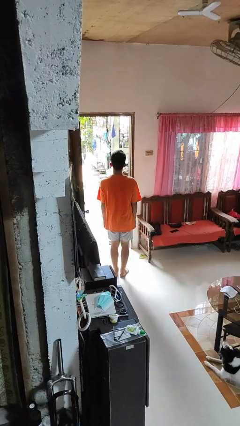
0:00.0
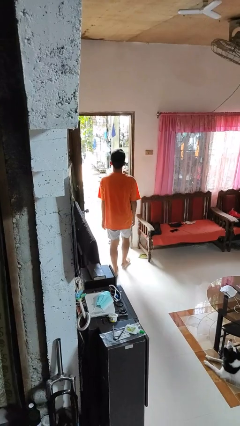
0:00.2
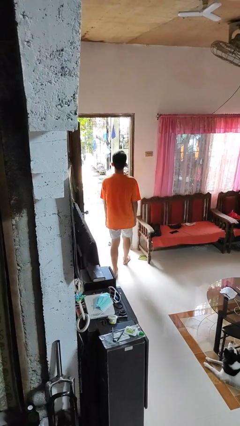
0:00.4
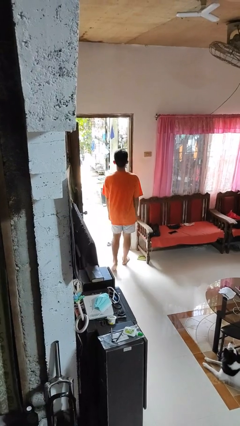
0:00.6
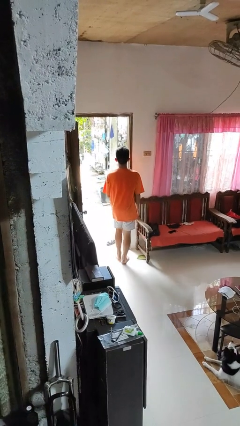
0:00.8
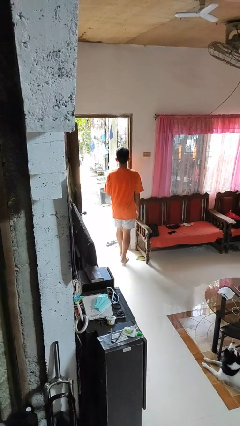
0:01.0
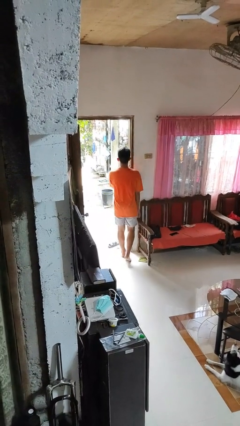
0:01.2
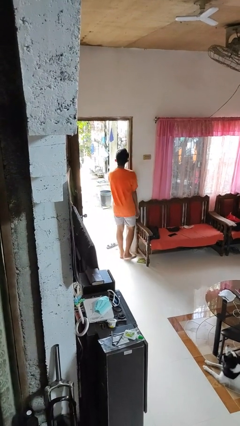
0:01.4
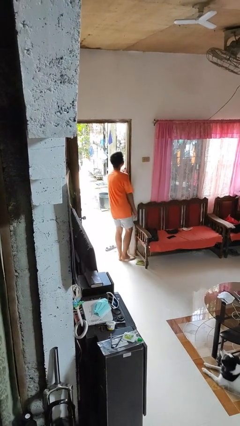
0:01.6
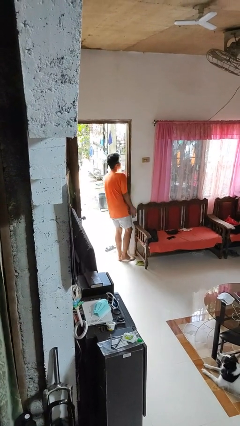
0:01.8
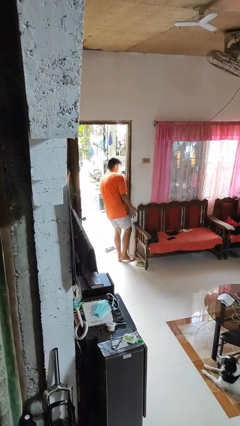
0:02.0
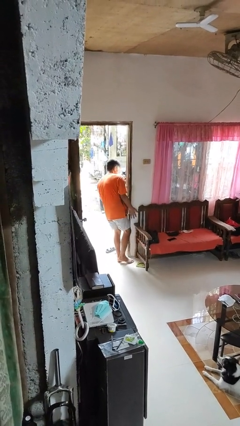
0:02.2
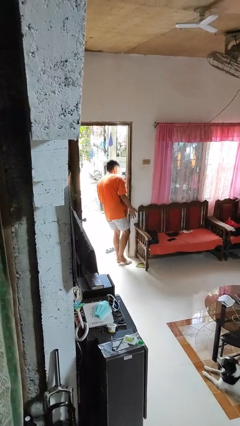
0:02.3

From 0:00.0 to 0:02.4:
person bumps into wall

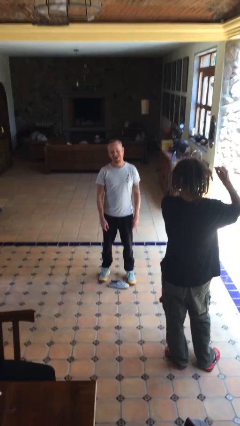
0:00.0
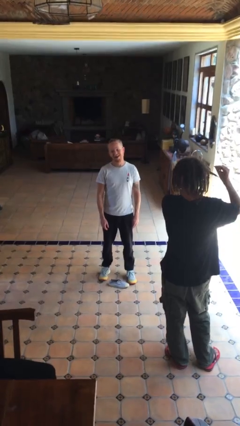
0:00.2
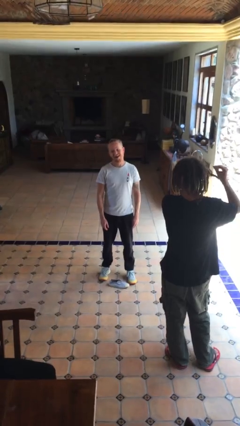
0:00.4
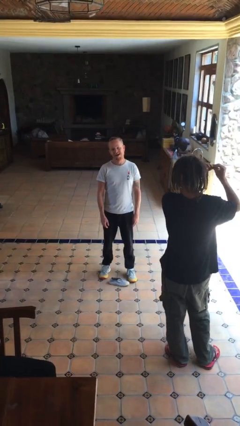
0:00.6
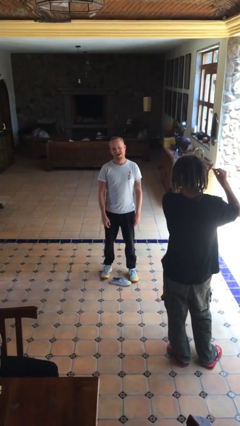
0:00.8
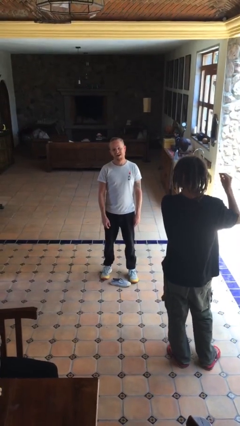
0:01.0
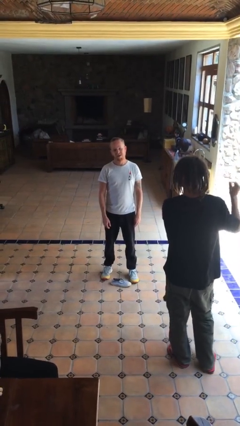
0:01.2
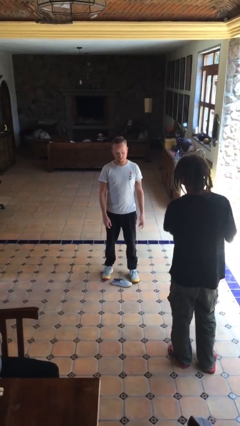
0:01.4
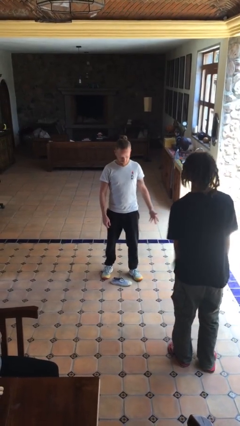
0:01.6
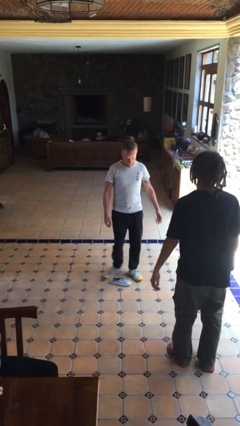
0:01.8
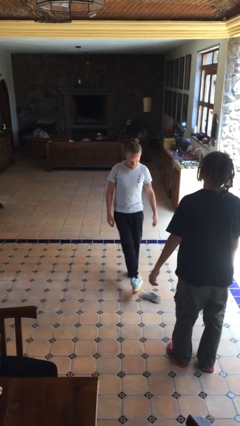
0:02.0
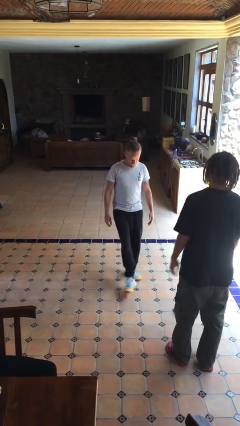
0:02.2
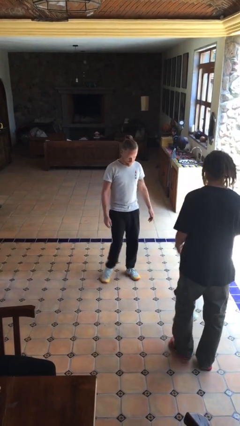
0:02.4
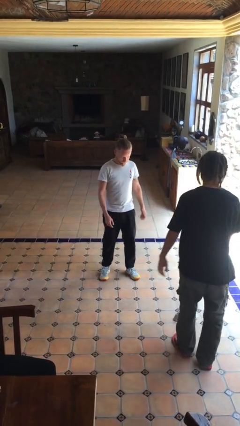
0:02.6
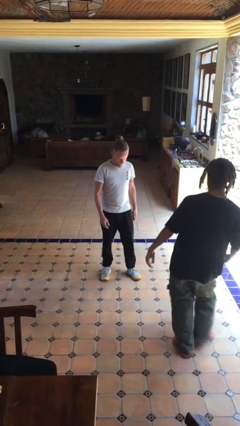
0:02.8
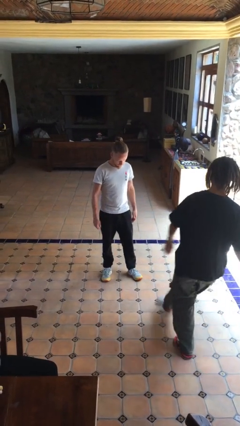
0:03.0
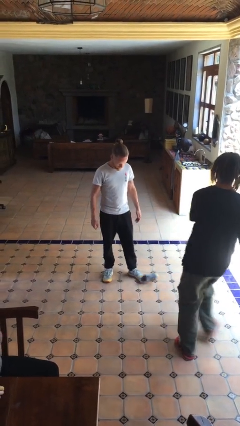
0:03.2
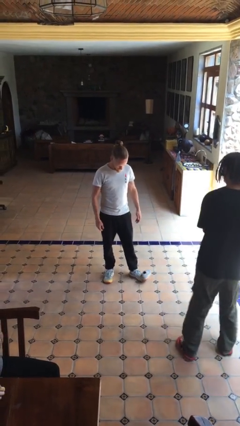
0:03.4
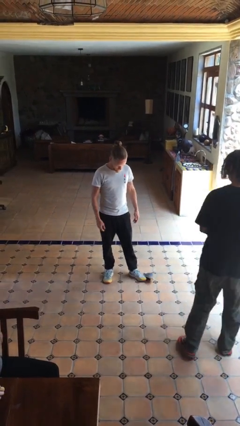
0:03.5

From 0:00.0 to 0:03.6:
person kicks object to person

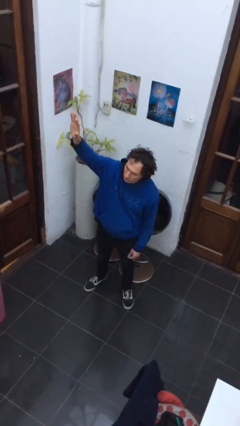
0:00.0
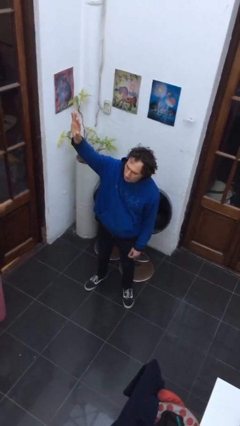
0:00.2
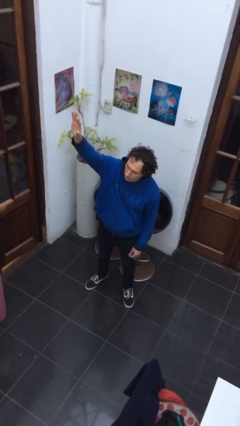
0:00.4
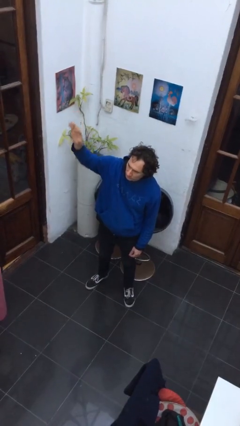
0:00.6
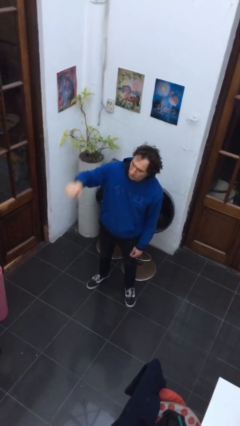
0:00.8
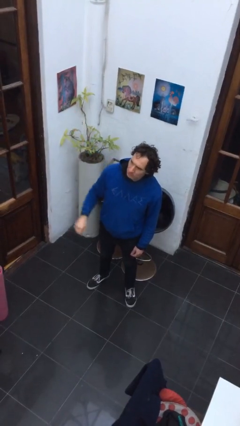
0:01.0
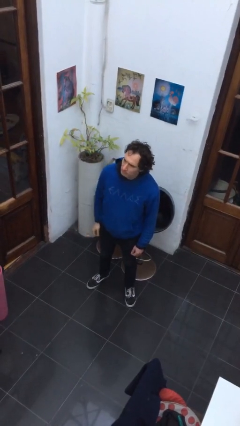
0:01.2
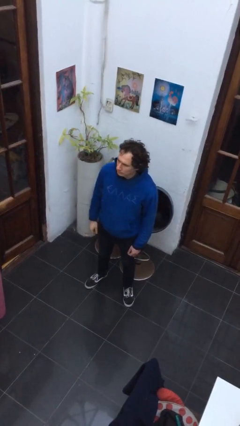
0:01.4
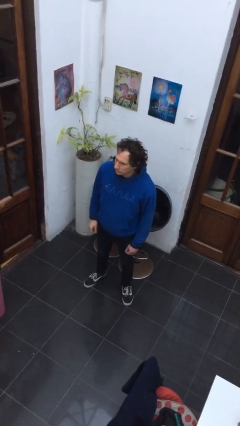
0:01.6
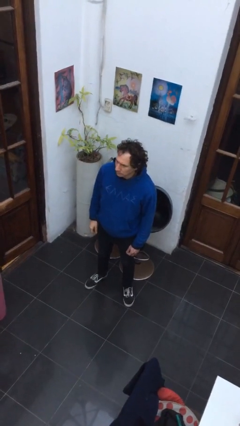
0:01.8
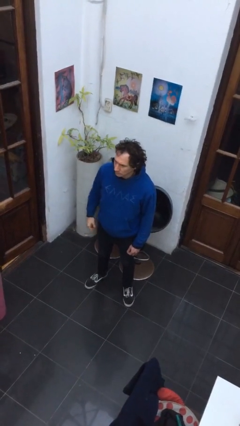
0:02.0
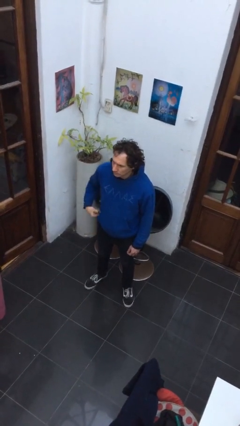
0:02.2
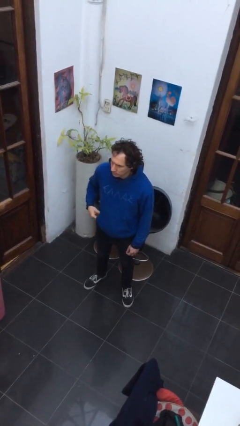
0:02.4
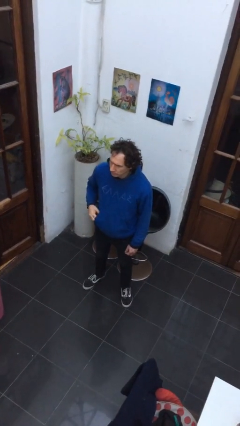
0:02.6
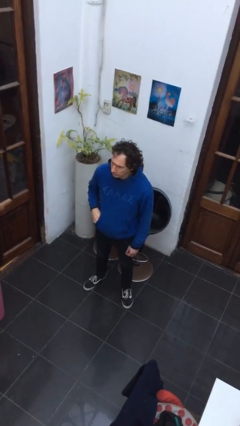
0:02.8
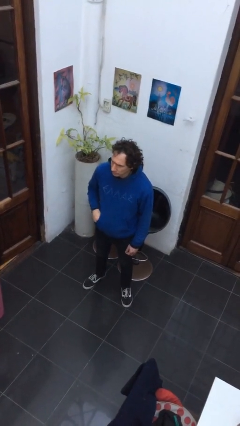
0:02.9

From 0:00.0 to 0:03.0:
person gestures lower hand

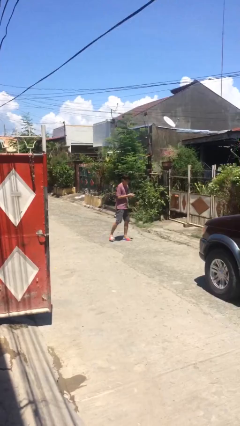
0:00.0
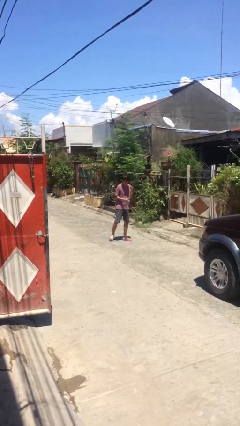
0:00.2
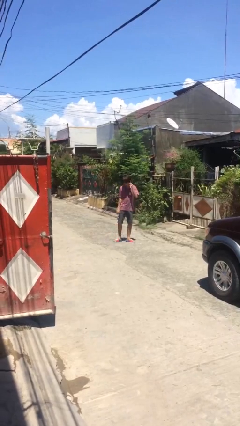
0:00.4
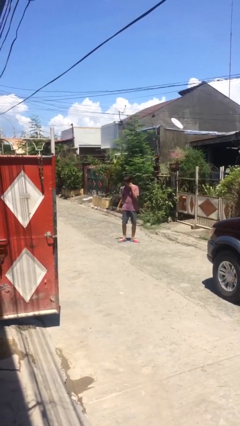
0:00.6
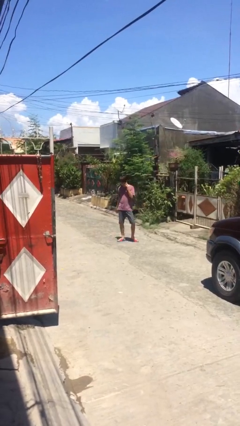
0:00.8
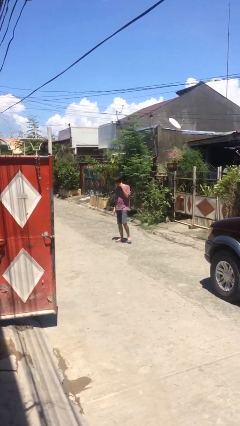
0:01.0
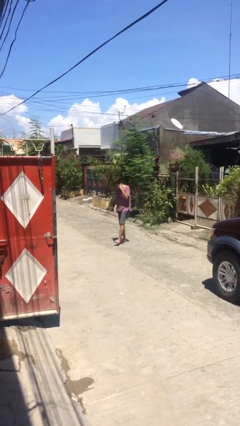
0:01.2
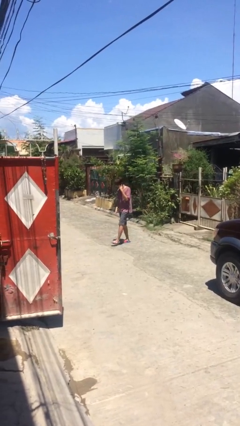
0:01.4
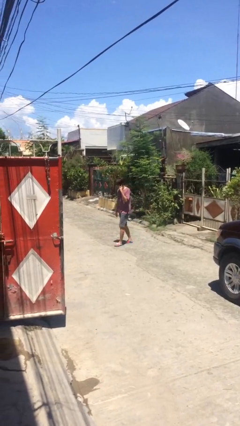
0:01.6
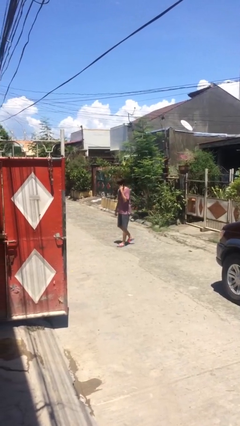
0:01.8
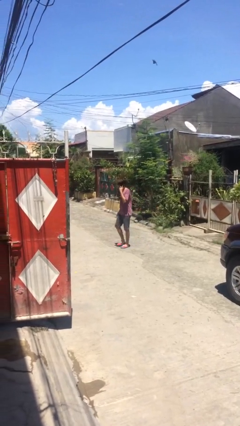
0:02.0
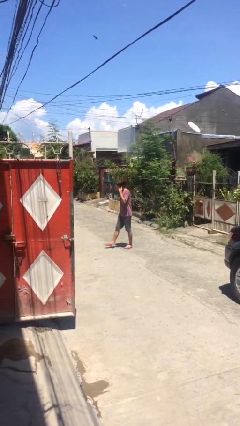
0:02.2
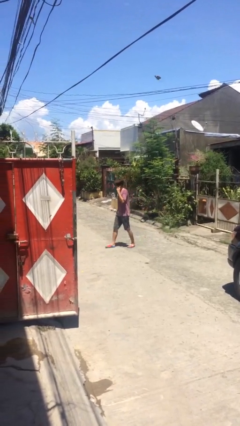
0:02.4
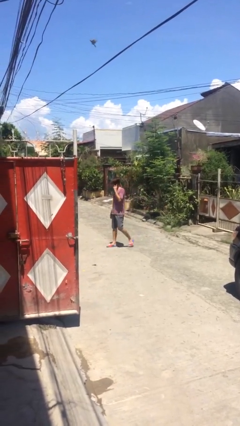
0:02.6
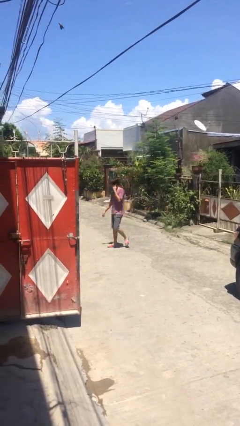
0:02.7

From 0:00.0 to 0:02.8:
person talks on phone

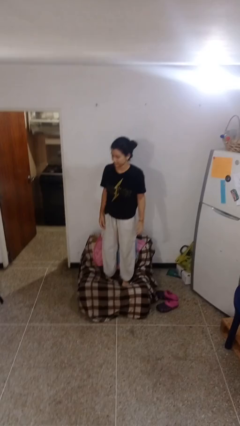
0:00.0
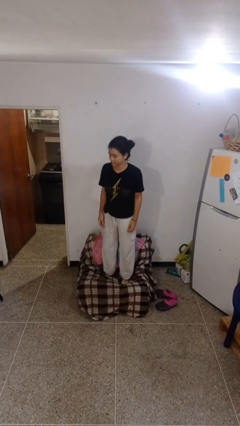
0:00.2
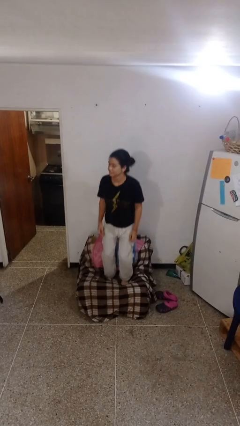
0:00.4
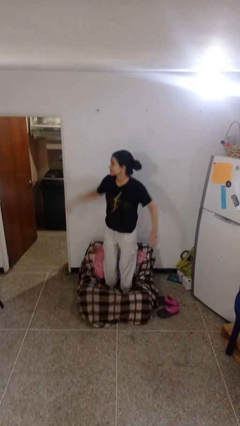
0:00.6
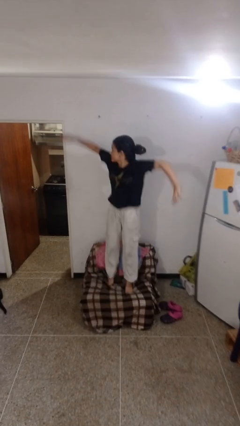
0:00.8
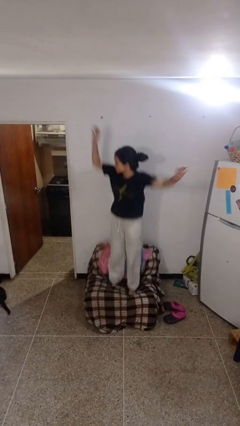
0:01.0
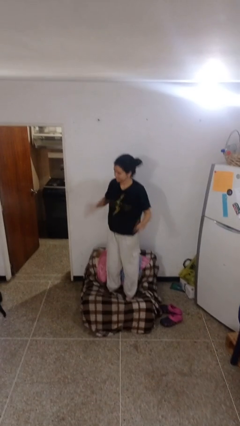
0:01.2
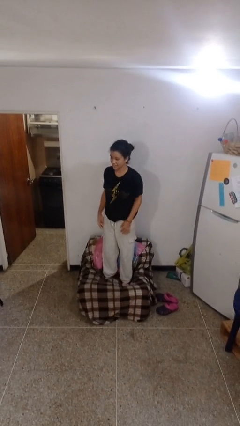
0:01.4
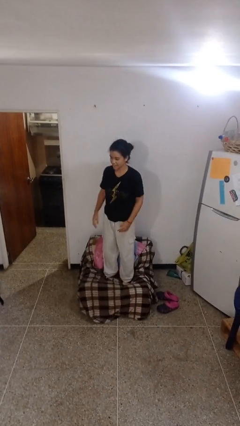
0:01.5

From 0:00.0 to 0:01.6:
person jumps on couch

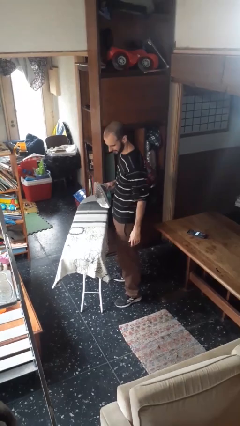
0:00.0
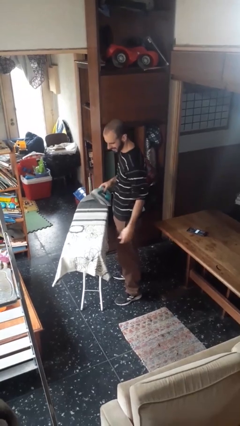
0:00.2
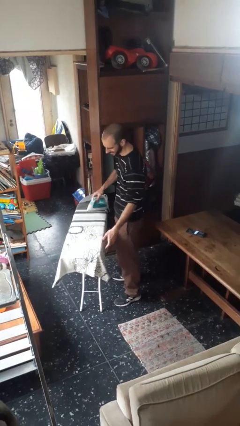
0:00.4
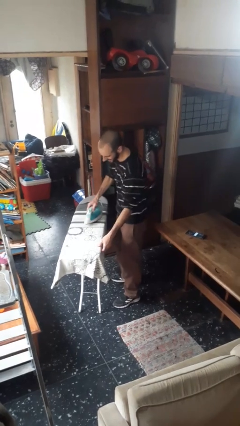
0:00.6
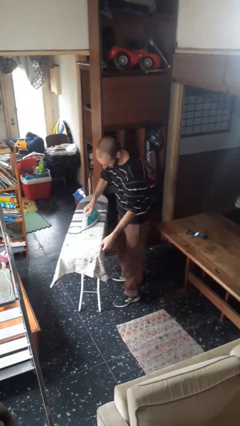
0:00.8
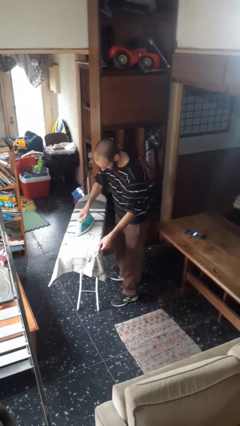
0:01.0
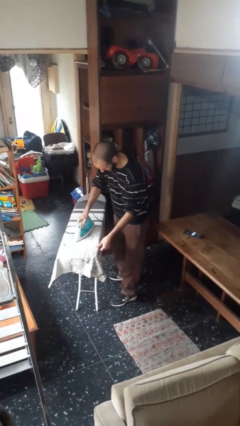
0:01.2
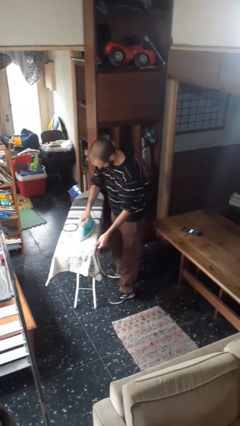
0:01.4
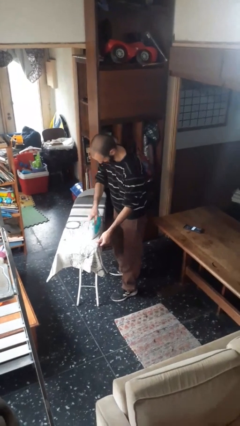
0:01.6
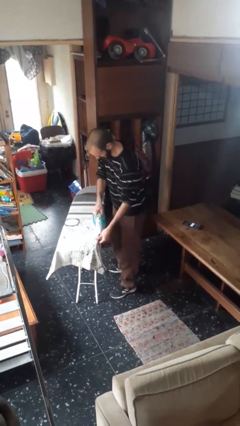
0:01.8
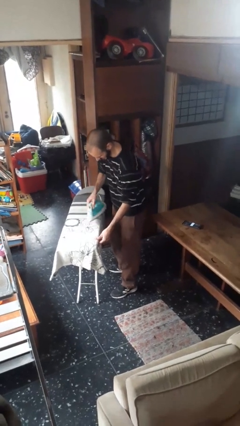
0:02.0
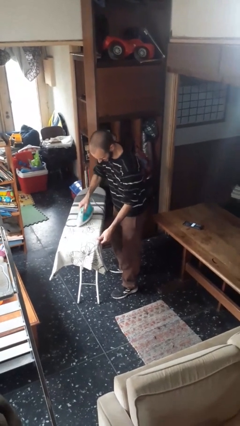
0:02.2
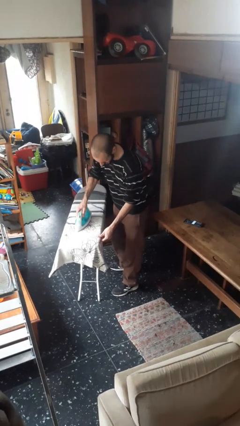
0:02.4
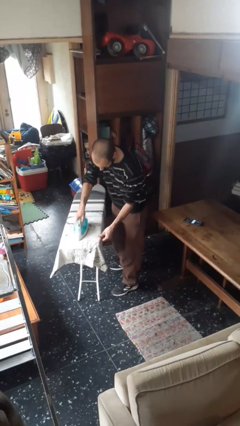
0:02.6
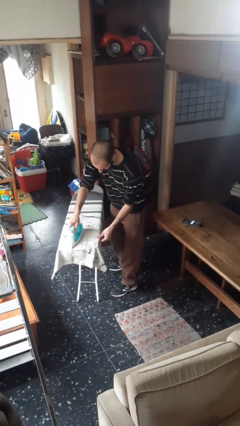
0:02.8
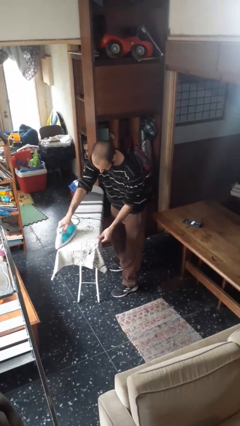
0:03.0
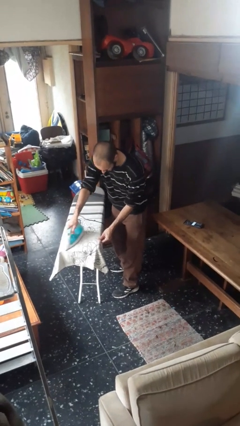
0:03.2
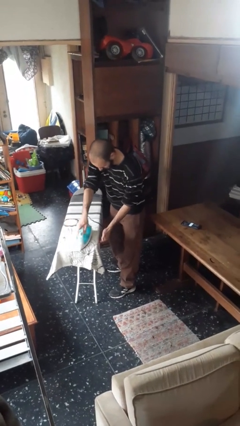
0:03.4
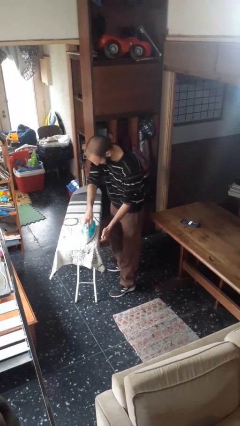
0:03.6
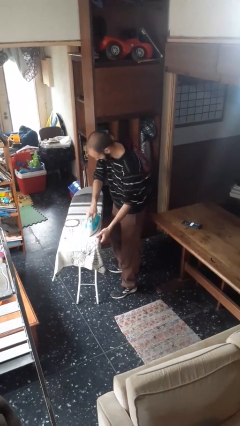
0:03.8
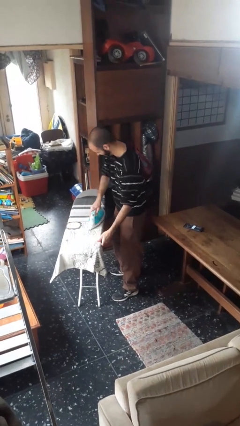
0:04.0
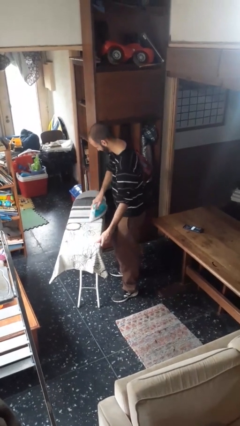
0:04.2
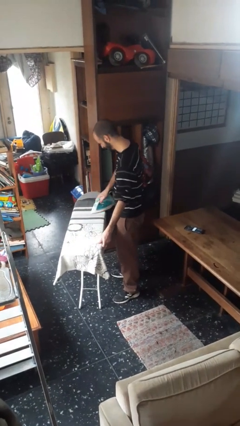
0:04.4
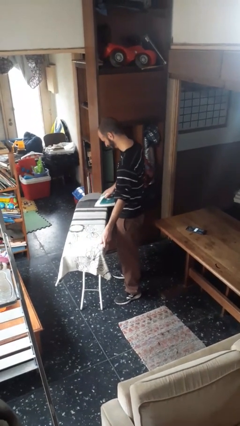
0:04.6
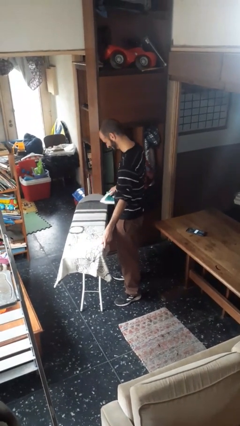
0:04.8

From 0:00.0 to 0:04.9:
person irons clothes
